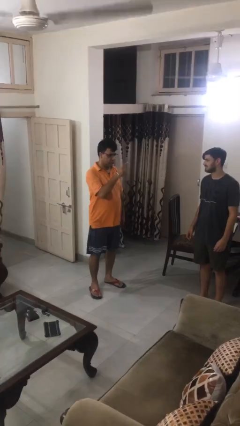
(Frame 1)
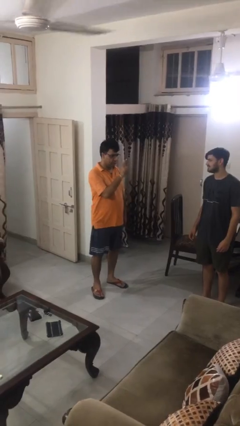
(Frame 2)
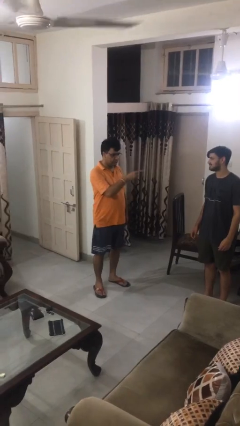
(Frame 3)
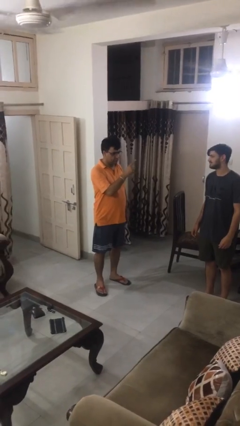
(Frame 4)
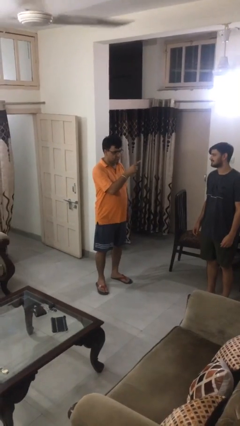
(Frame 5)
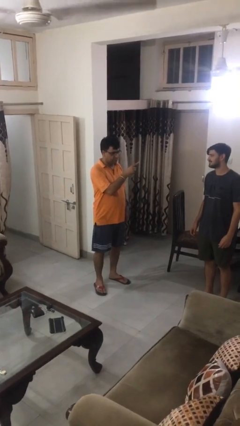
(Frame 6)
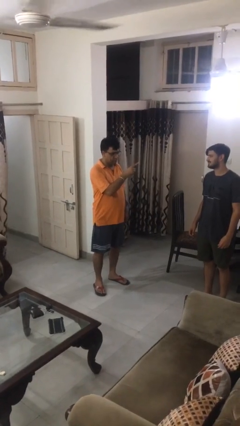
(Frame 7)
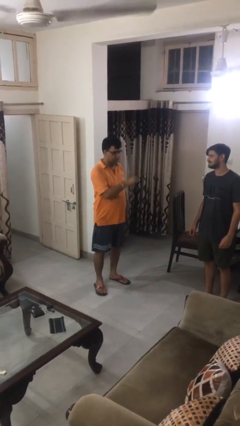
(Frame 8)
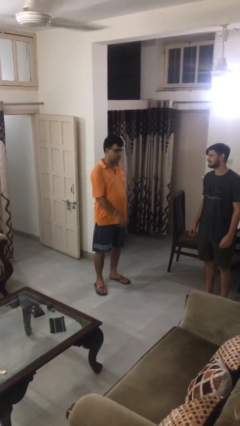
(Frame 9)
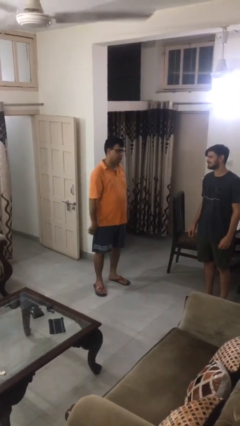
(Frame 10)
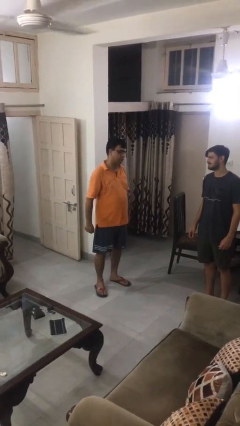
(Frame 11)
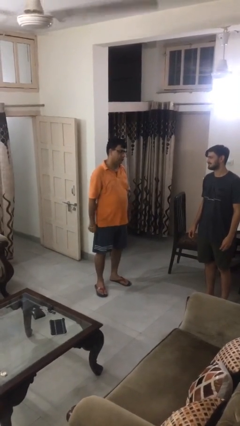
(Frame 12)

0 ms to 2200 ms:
person points at person

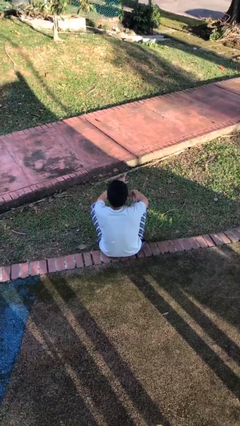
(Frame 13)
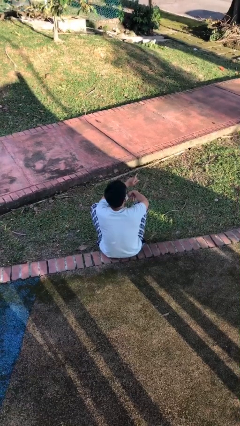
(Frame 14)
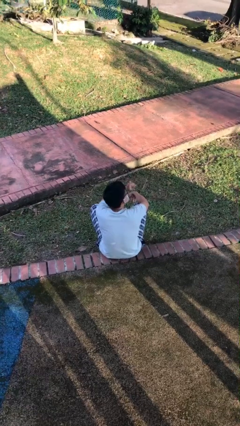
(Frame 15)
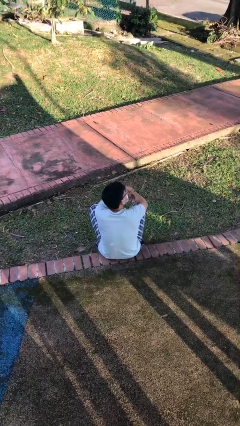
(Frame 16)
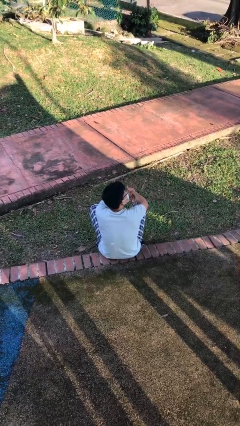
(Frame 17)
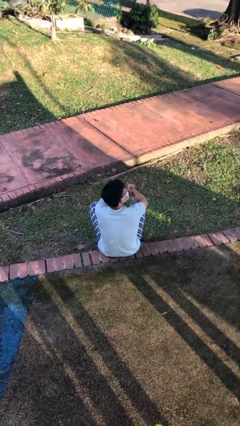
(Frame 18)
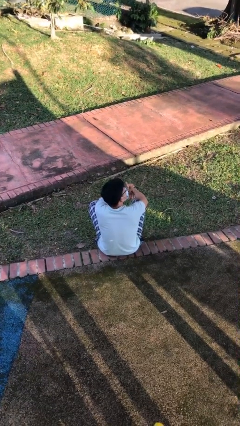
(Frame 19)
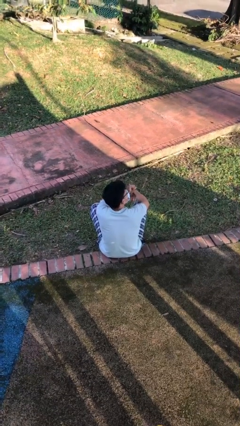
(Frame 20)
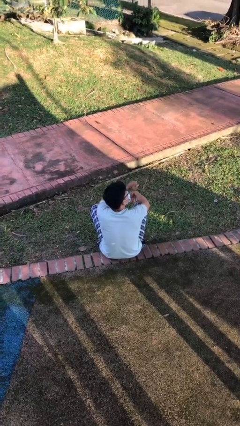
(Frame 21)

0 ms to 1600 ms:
person gestures be quiet

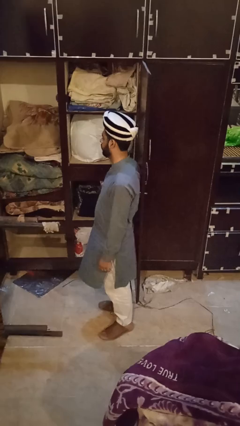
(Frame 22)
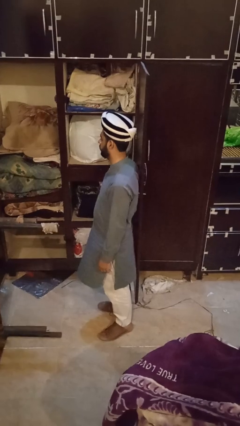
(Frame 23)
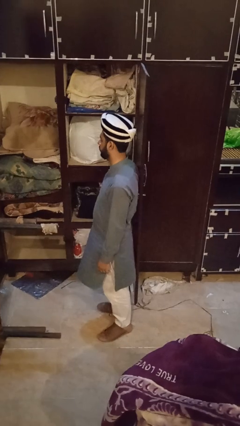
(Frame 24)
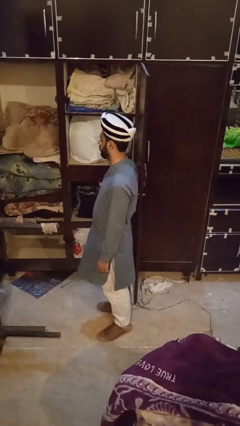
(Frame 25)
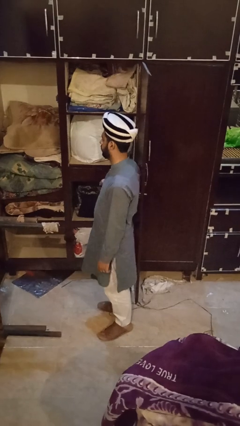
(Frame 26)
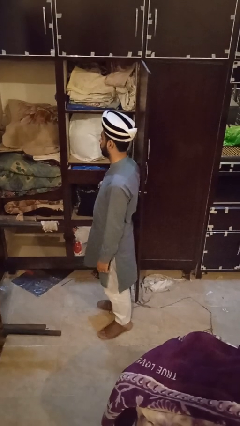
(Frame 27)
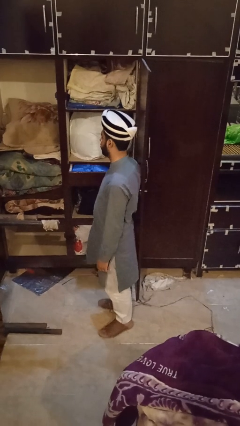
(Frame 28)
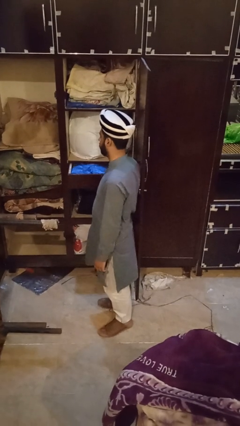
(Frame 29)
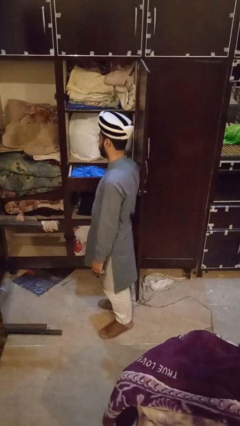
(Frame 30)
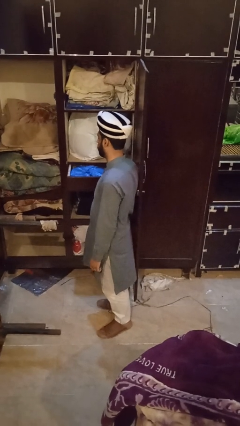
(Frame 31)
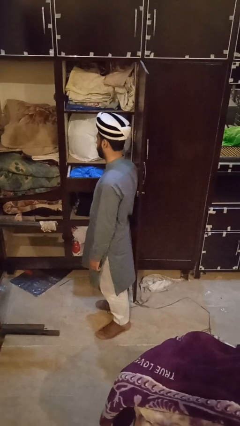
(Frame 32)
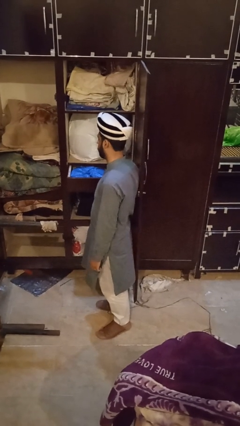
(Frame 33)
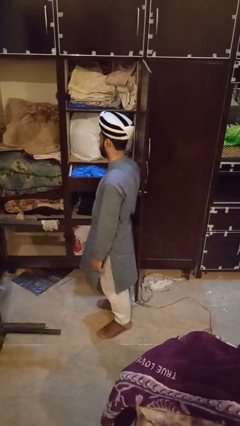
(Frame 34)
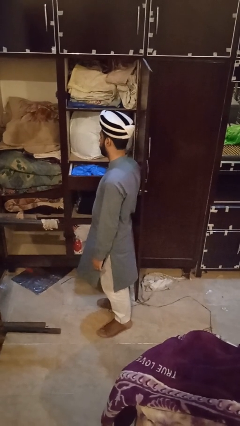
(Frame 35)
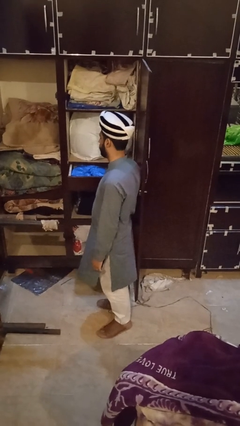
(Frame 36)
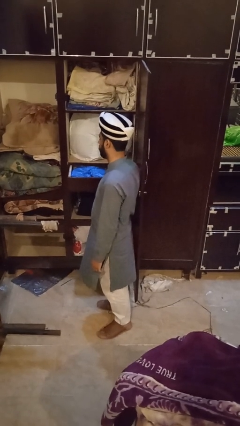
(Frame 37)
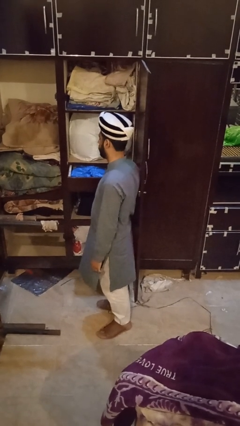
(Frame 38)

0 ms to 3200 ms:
person opens dresser drawer

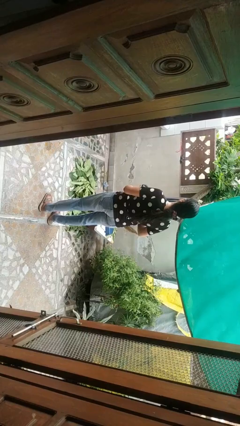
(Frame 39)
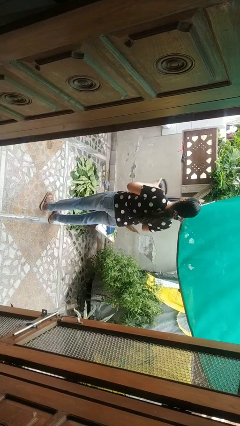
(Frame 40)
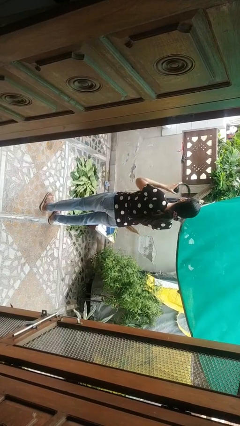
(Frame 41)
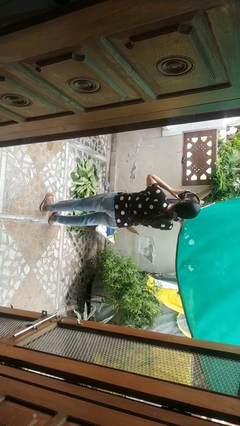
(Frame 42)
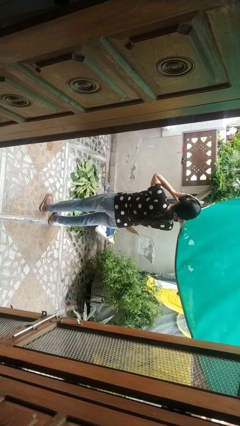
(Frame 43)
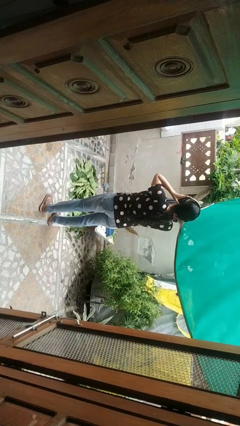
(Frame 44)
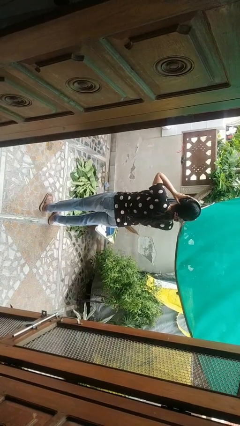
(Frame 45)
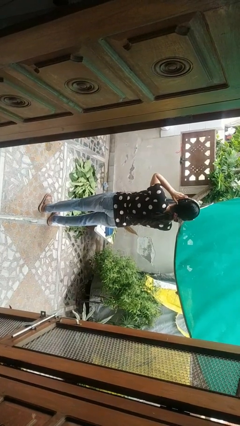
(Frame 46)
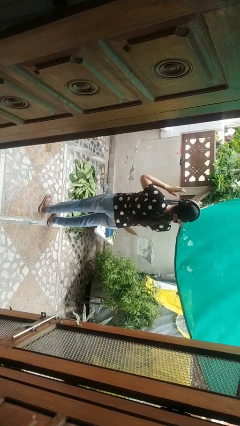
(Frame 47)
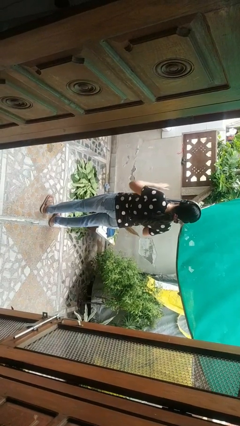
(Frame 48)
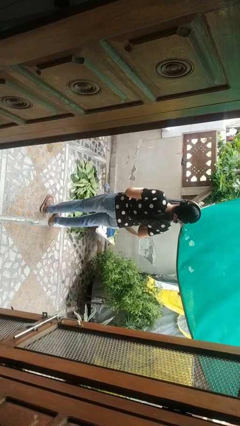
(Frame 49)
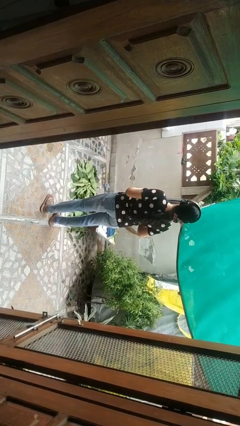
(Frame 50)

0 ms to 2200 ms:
person puts on headphones

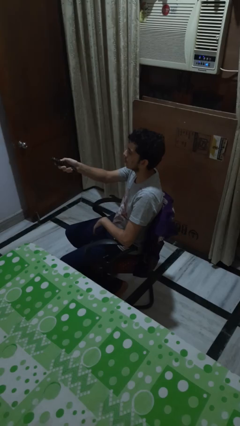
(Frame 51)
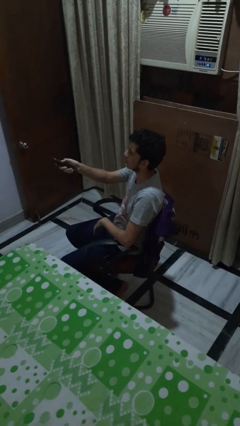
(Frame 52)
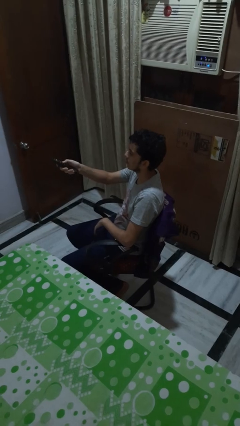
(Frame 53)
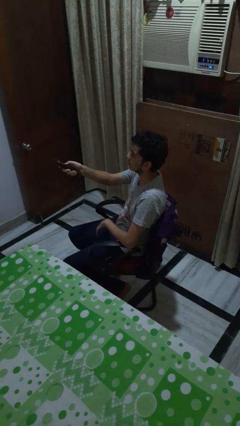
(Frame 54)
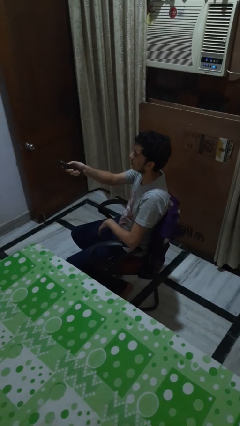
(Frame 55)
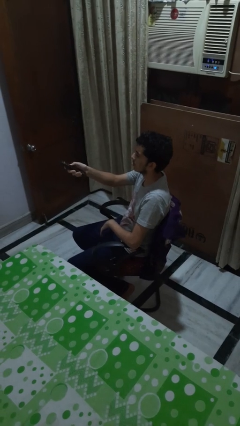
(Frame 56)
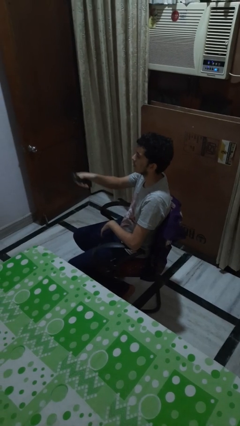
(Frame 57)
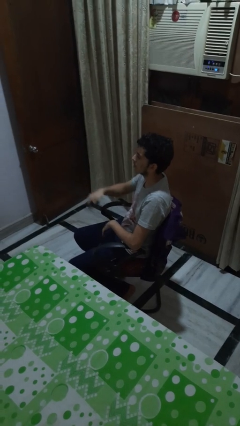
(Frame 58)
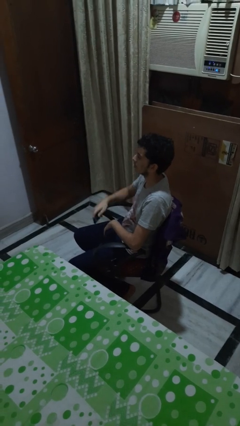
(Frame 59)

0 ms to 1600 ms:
person uses television remote

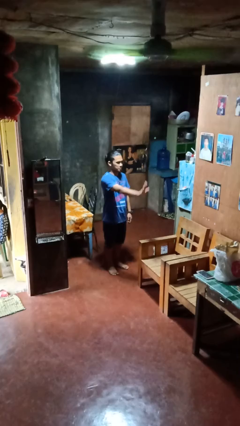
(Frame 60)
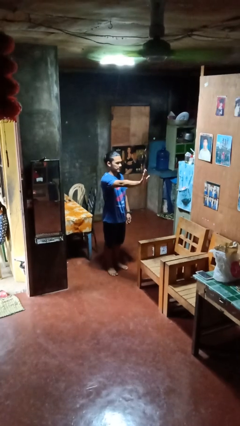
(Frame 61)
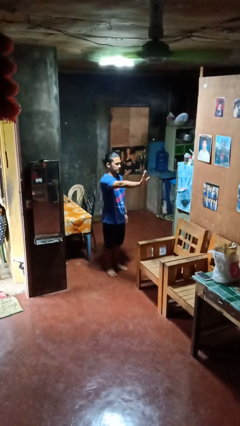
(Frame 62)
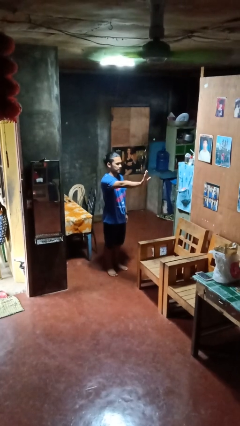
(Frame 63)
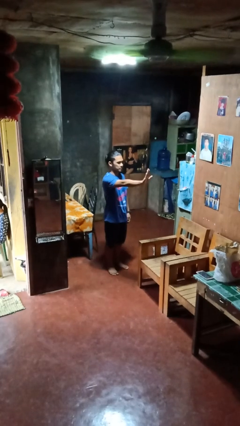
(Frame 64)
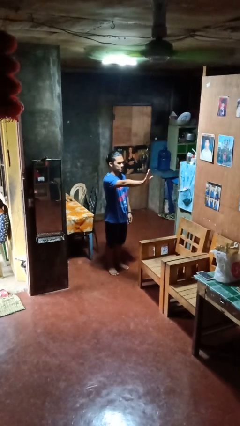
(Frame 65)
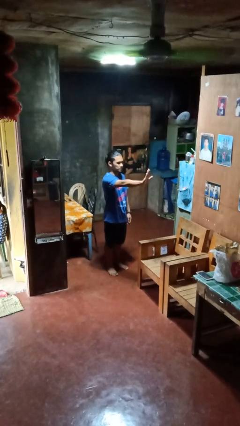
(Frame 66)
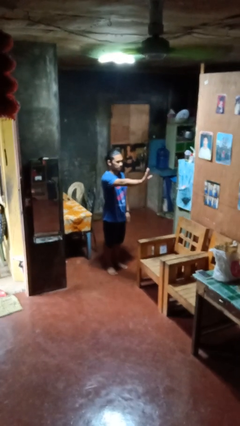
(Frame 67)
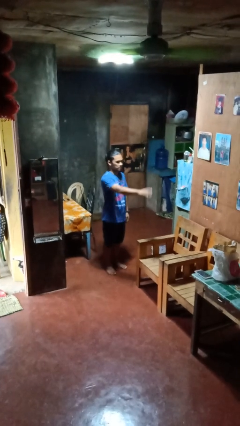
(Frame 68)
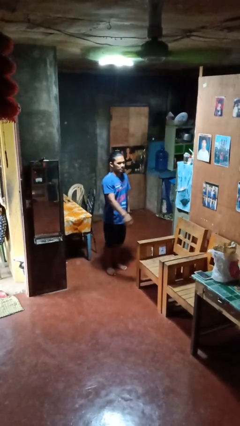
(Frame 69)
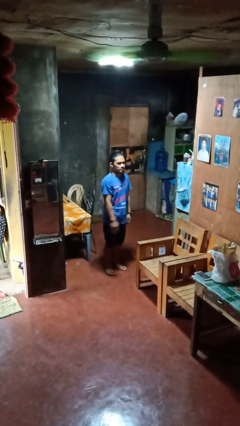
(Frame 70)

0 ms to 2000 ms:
person gestures stop

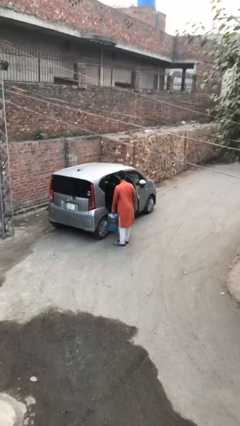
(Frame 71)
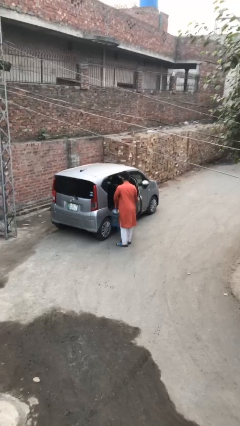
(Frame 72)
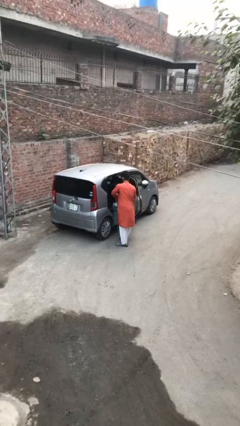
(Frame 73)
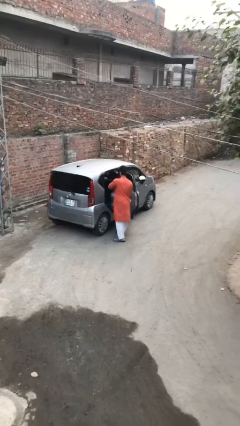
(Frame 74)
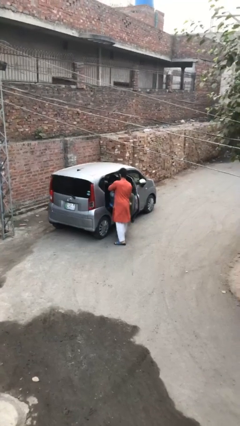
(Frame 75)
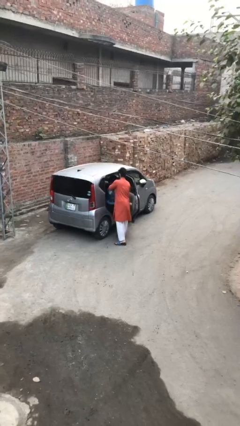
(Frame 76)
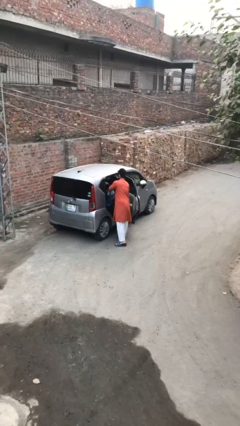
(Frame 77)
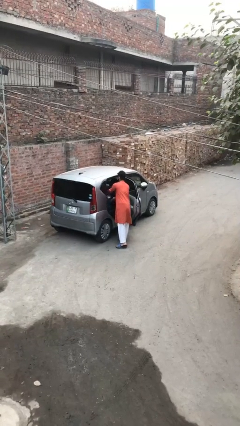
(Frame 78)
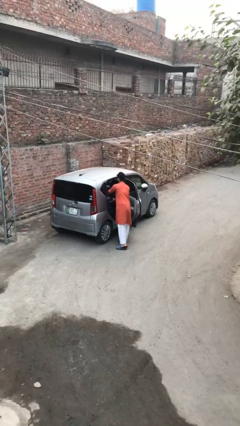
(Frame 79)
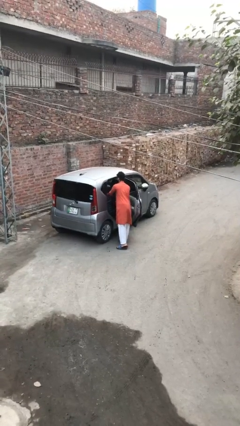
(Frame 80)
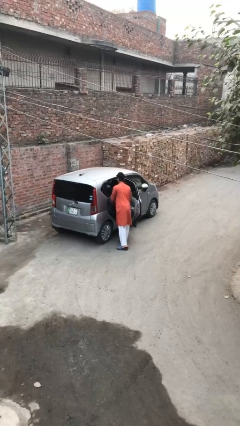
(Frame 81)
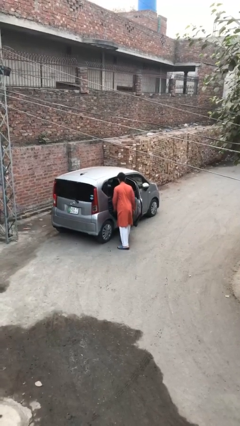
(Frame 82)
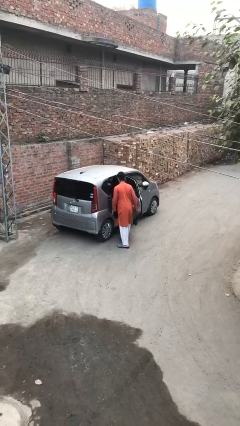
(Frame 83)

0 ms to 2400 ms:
person loads car

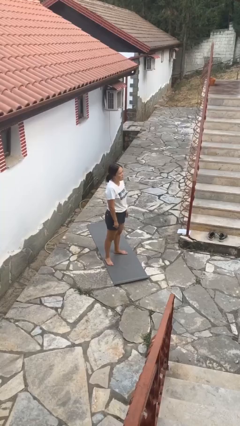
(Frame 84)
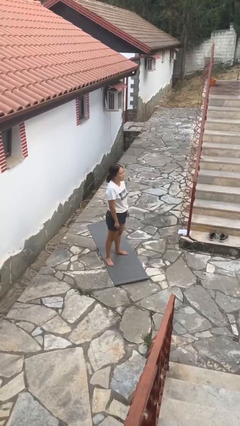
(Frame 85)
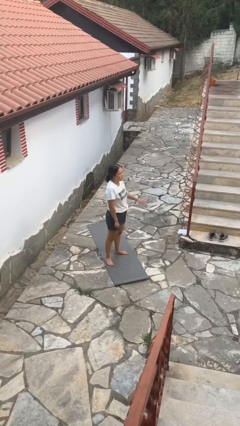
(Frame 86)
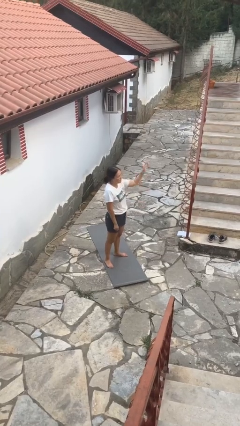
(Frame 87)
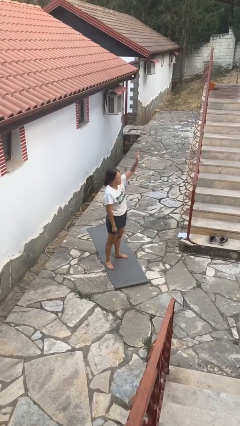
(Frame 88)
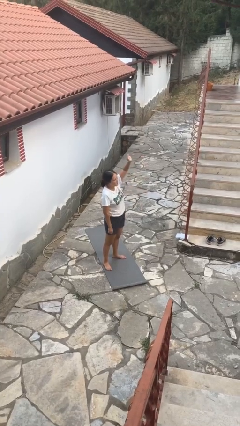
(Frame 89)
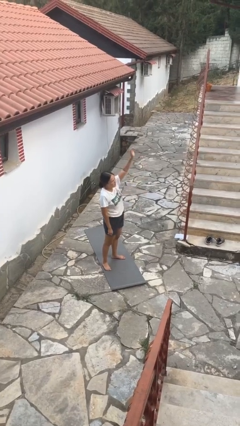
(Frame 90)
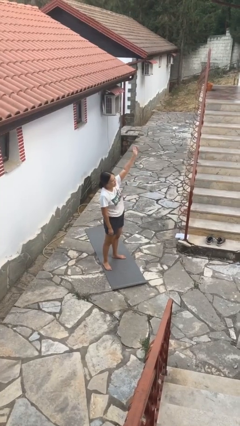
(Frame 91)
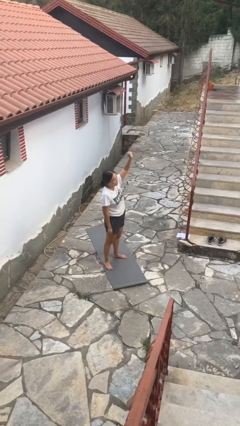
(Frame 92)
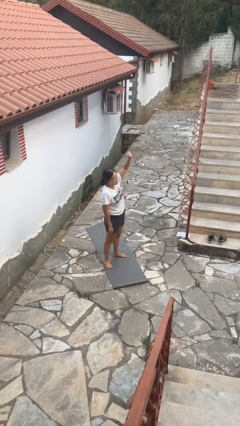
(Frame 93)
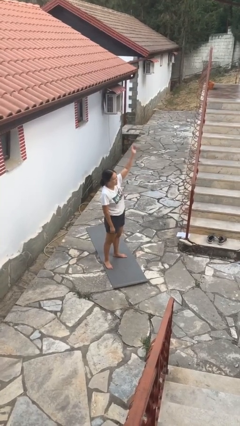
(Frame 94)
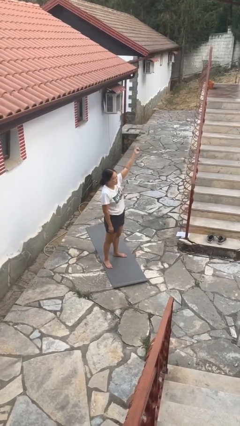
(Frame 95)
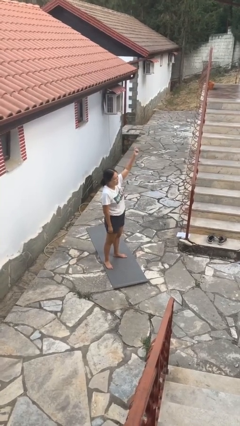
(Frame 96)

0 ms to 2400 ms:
person gestures raise hand
